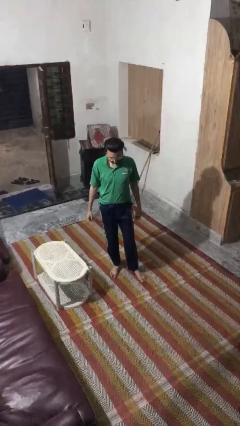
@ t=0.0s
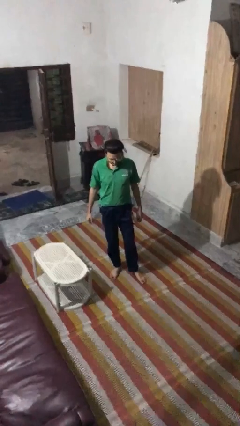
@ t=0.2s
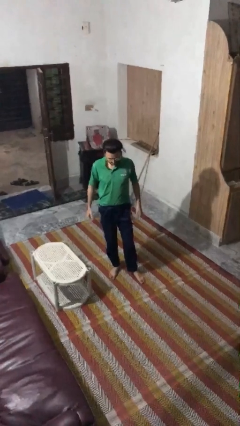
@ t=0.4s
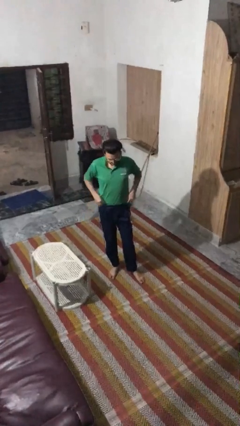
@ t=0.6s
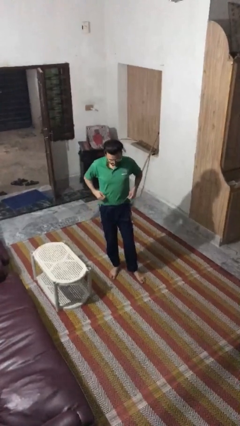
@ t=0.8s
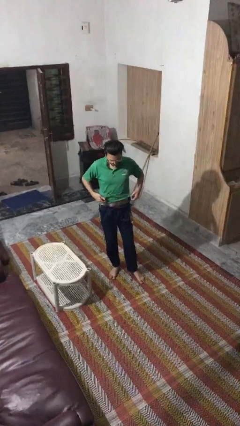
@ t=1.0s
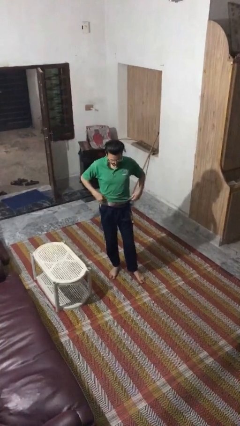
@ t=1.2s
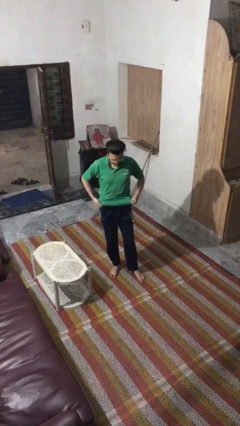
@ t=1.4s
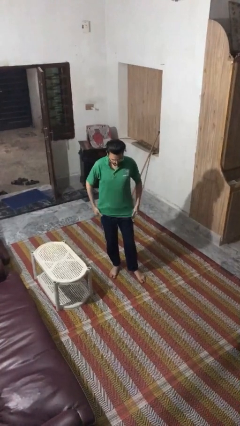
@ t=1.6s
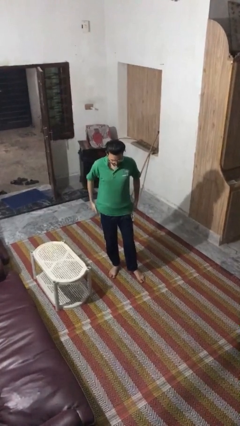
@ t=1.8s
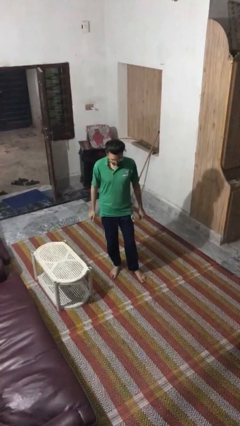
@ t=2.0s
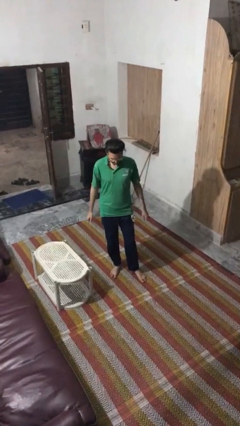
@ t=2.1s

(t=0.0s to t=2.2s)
person untucks shirt

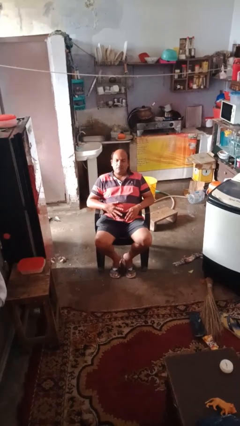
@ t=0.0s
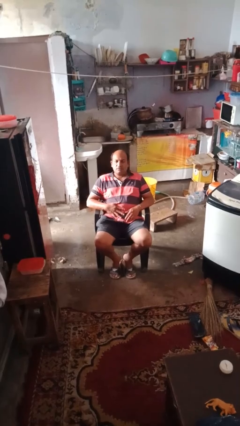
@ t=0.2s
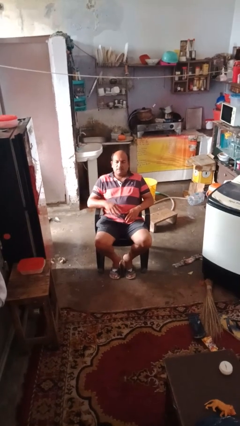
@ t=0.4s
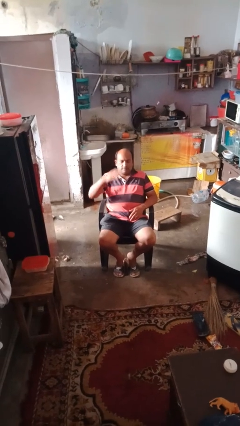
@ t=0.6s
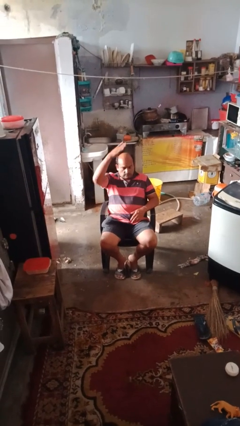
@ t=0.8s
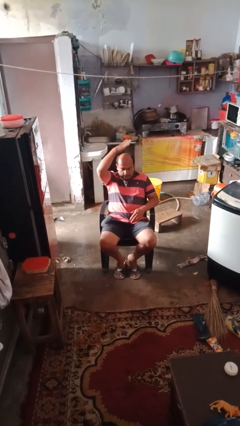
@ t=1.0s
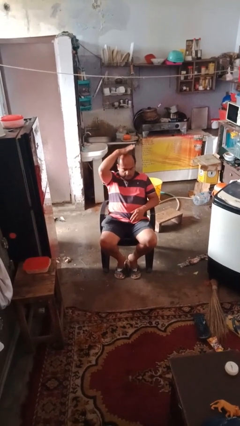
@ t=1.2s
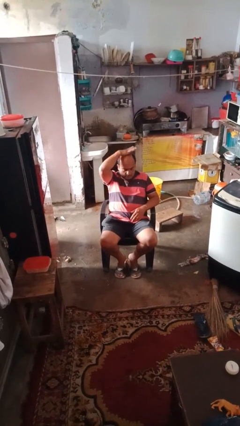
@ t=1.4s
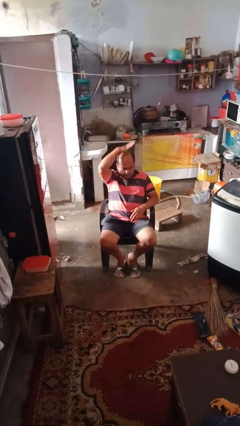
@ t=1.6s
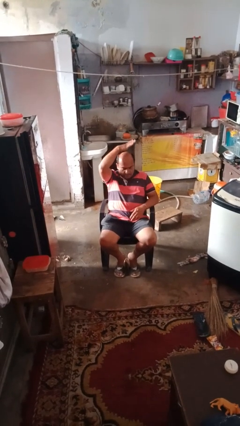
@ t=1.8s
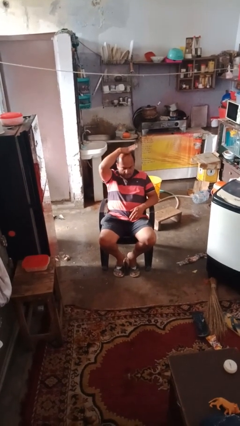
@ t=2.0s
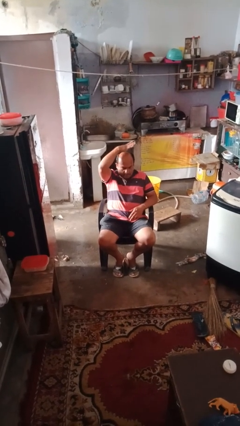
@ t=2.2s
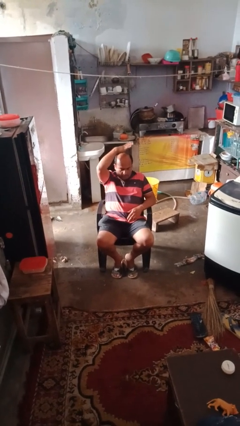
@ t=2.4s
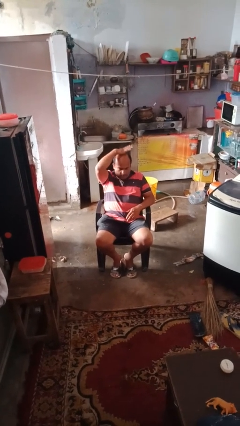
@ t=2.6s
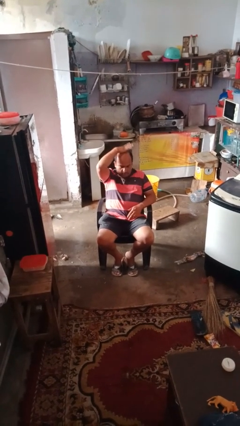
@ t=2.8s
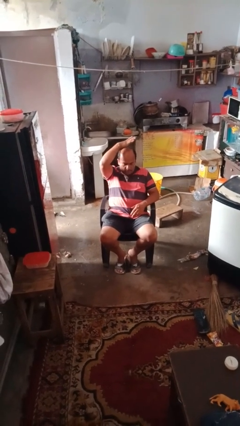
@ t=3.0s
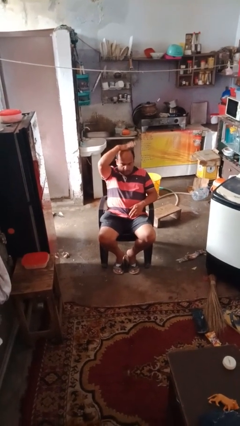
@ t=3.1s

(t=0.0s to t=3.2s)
person holds object above head

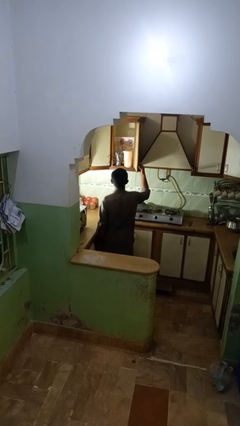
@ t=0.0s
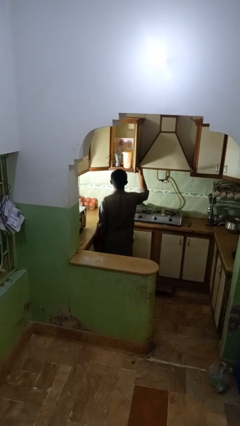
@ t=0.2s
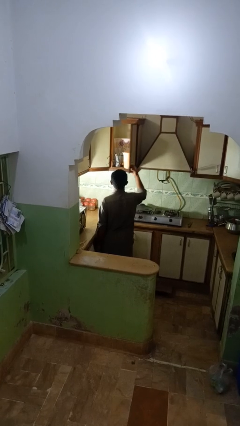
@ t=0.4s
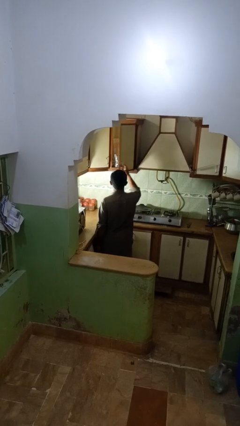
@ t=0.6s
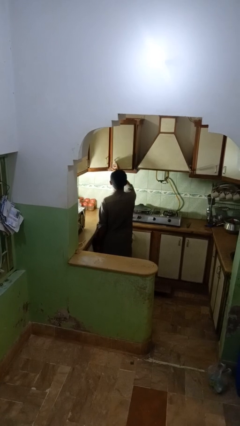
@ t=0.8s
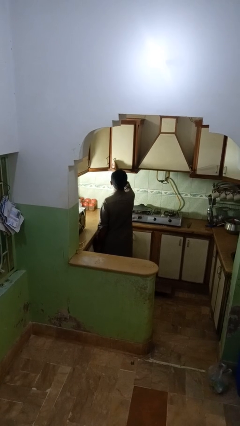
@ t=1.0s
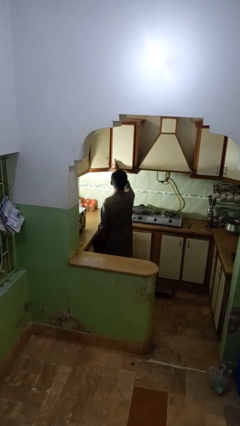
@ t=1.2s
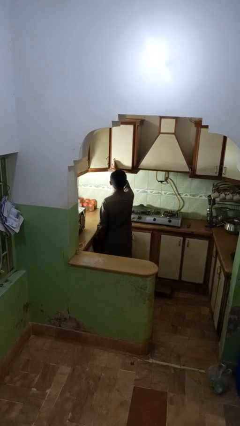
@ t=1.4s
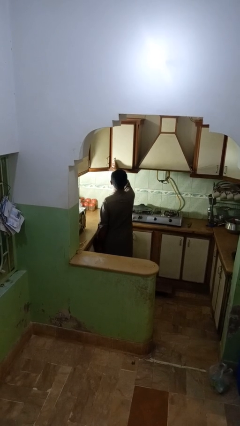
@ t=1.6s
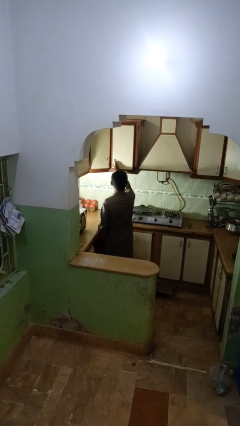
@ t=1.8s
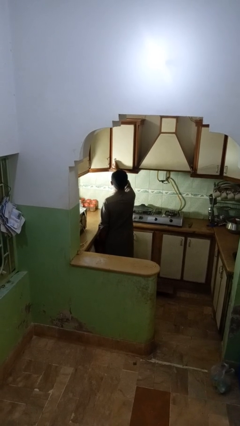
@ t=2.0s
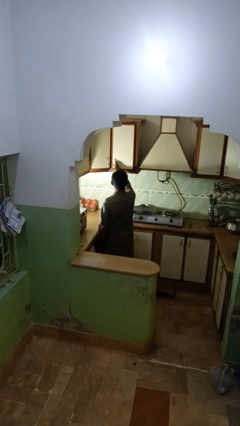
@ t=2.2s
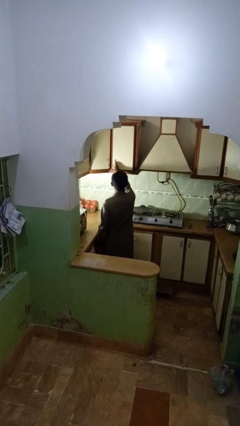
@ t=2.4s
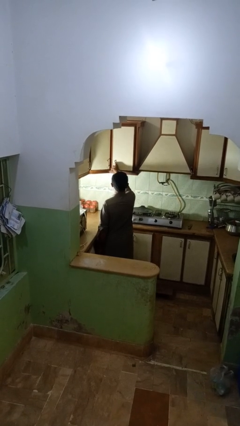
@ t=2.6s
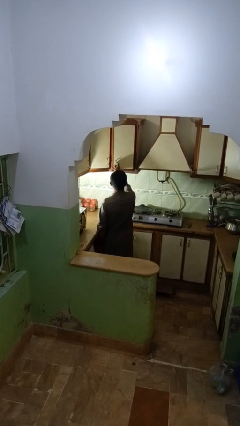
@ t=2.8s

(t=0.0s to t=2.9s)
person closes kitchen drawer

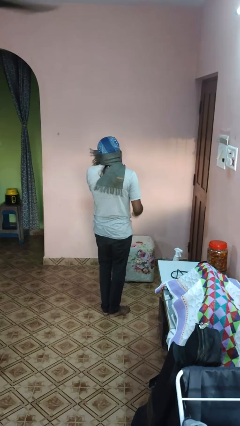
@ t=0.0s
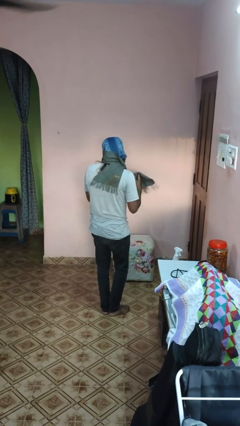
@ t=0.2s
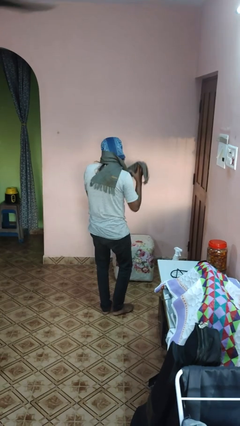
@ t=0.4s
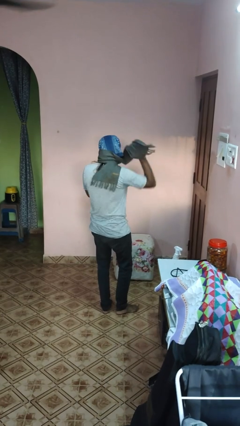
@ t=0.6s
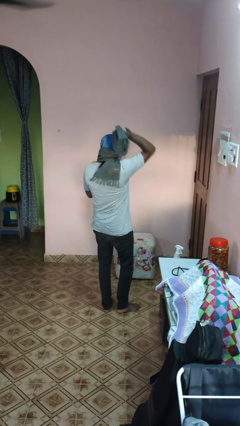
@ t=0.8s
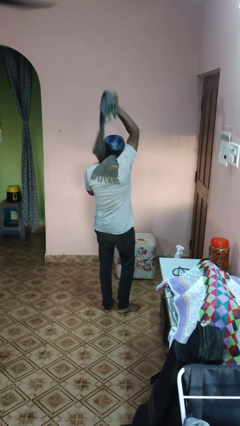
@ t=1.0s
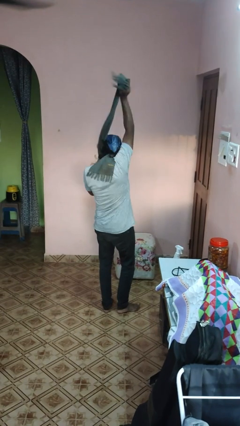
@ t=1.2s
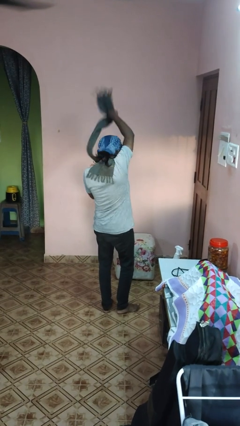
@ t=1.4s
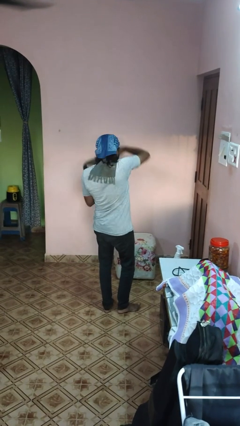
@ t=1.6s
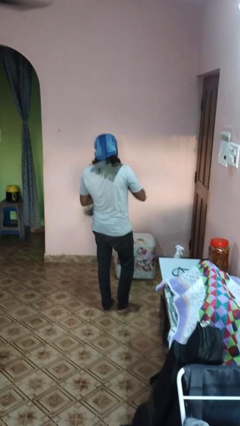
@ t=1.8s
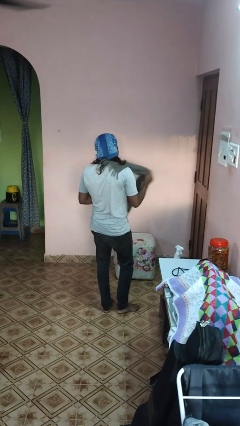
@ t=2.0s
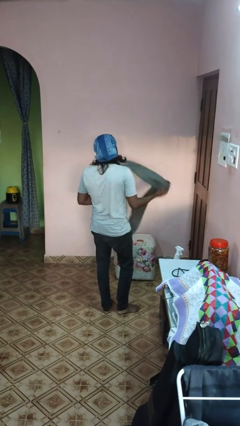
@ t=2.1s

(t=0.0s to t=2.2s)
person takes off scarf

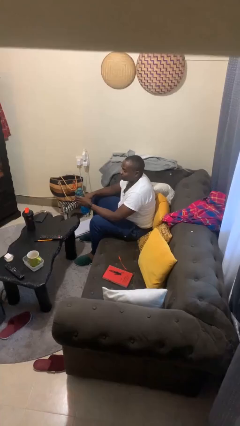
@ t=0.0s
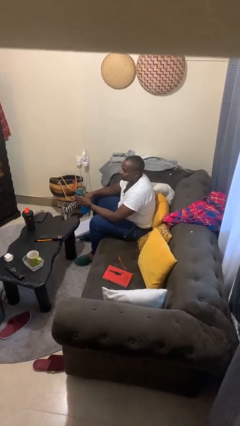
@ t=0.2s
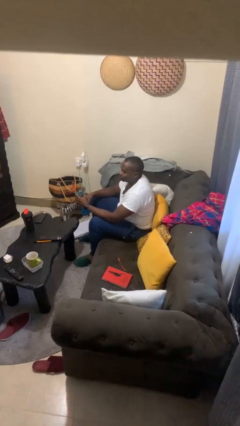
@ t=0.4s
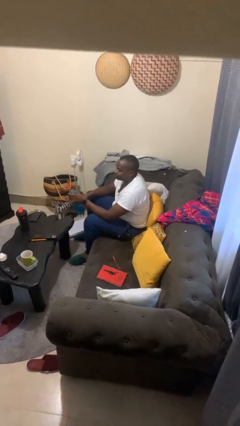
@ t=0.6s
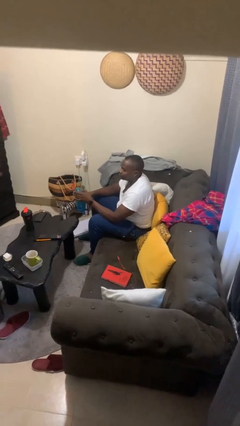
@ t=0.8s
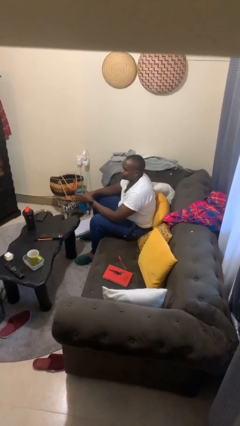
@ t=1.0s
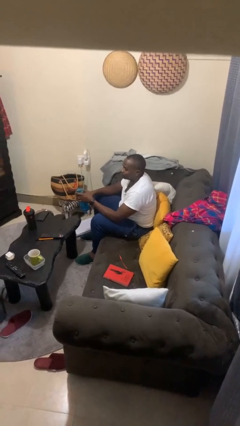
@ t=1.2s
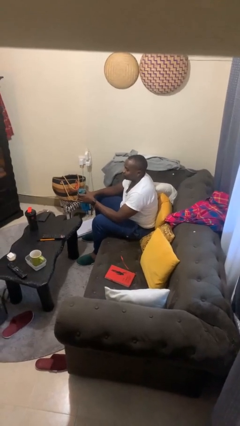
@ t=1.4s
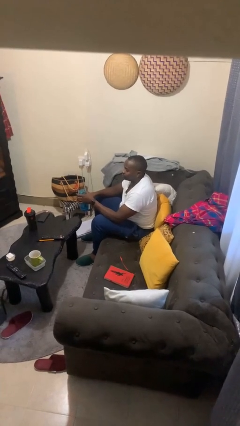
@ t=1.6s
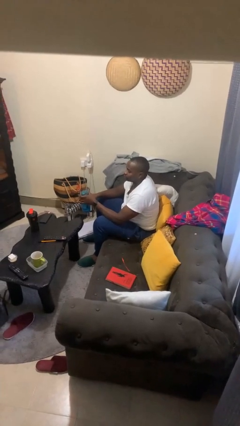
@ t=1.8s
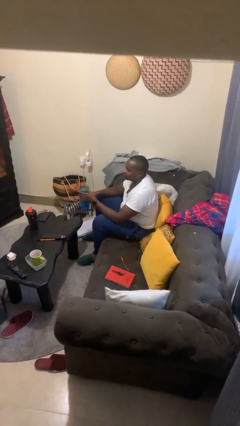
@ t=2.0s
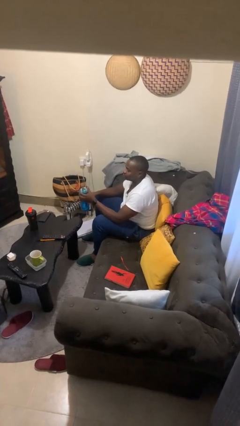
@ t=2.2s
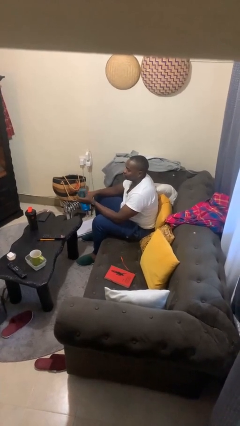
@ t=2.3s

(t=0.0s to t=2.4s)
person unscrews lid from bottle

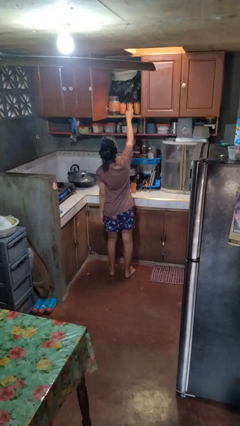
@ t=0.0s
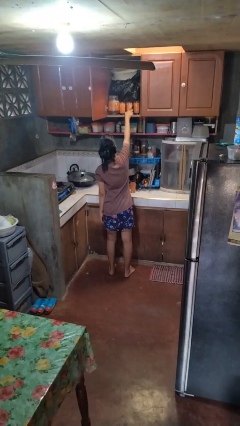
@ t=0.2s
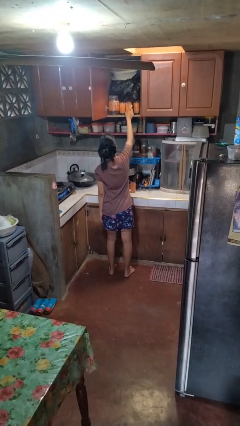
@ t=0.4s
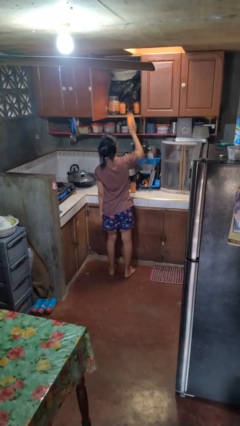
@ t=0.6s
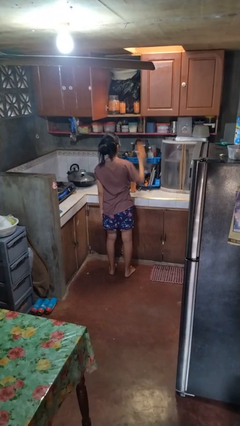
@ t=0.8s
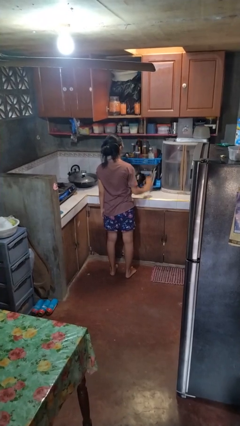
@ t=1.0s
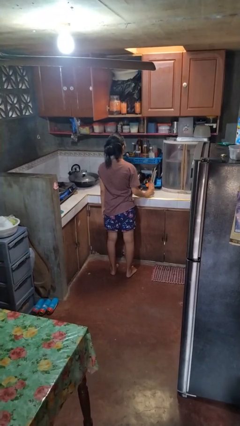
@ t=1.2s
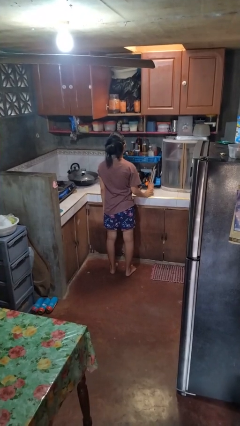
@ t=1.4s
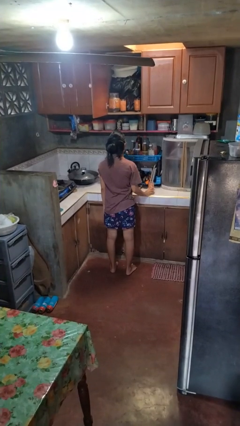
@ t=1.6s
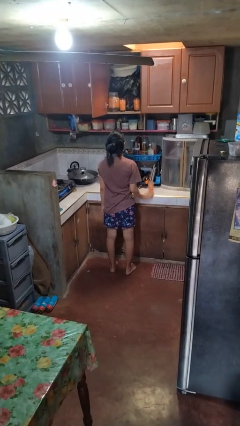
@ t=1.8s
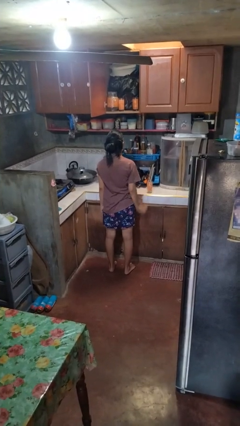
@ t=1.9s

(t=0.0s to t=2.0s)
person takes object from cabinet

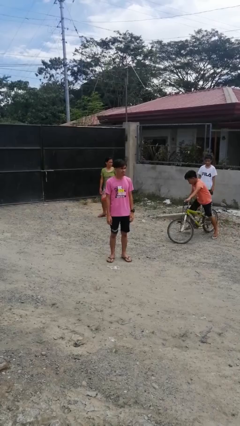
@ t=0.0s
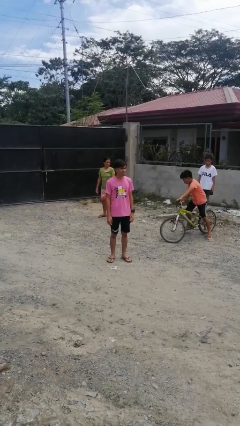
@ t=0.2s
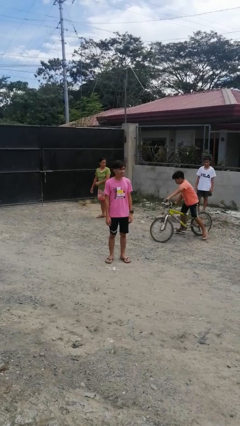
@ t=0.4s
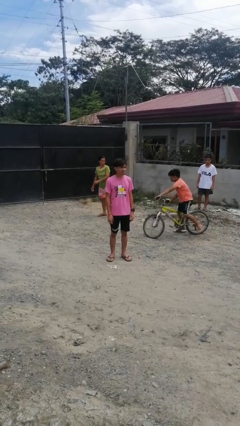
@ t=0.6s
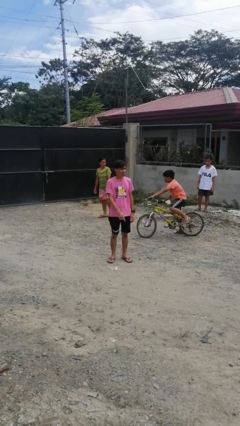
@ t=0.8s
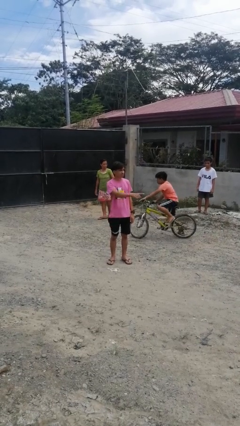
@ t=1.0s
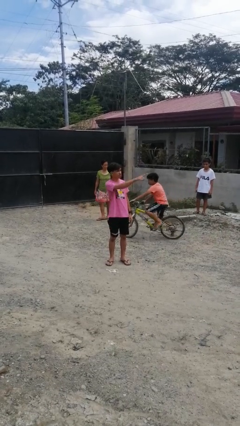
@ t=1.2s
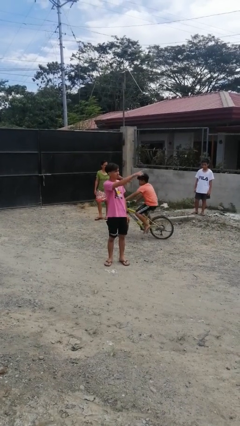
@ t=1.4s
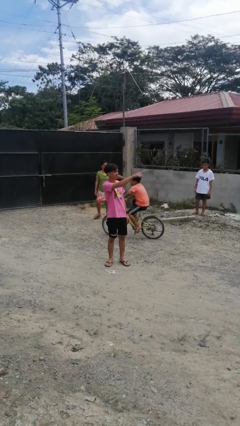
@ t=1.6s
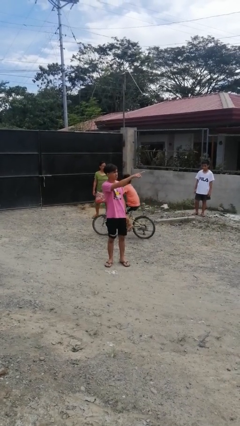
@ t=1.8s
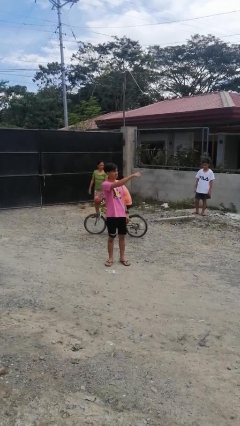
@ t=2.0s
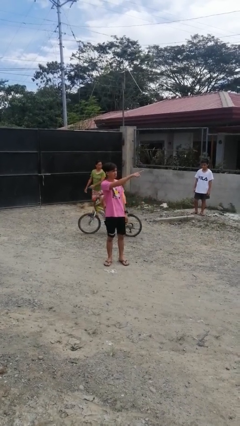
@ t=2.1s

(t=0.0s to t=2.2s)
person points at person
